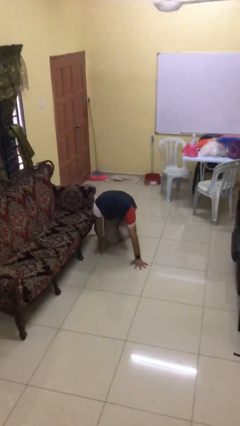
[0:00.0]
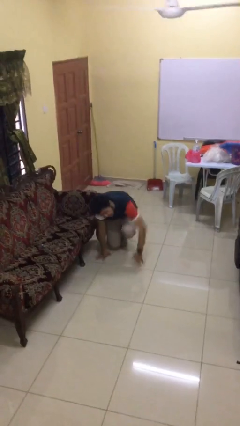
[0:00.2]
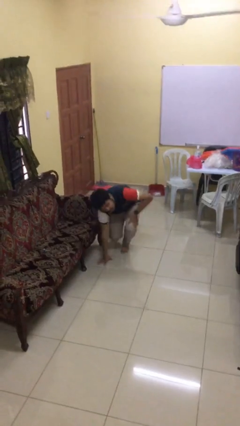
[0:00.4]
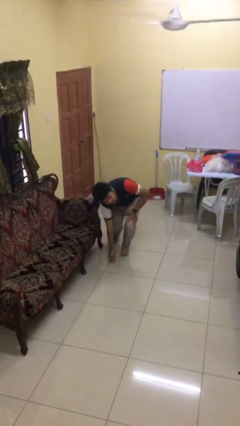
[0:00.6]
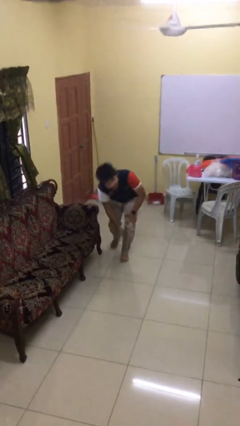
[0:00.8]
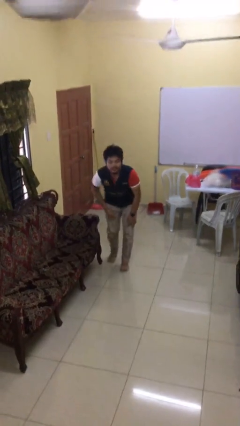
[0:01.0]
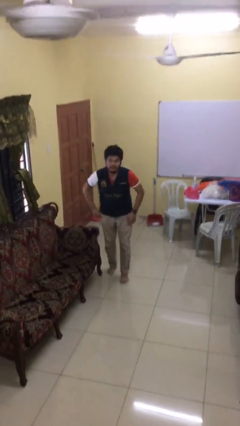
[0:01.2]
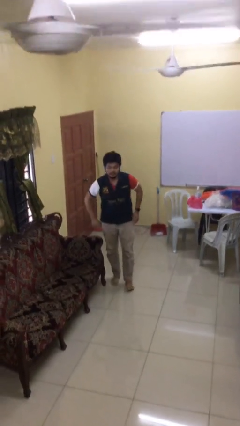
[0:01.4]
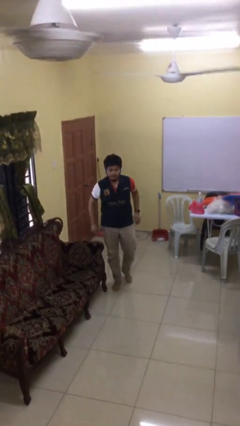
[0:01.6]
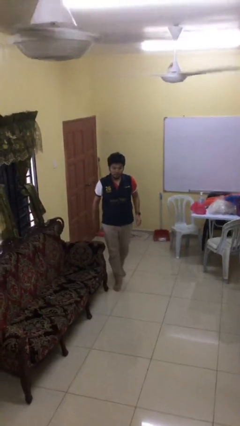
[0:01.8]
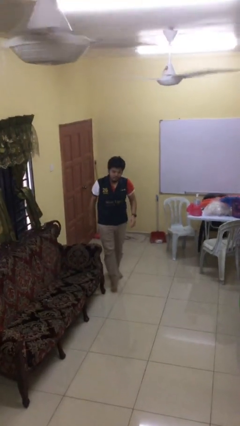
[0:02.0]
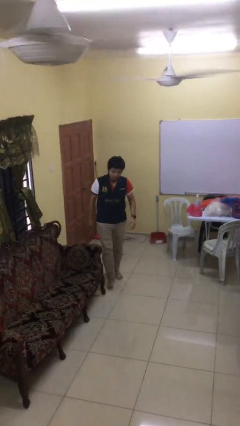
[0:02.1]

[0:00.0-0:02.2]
person stands up from floor

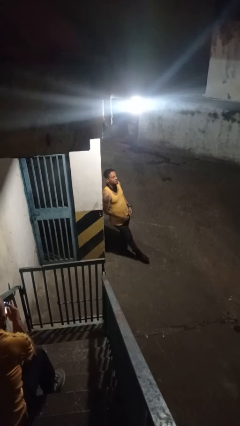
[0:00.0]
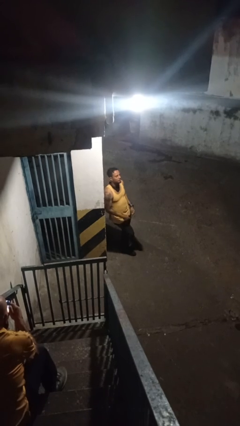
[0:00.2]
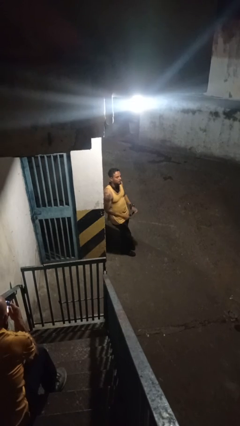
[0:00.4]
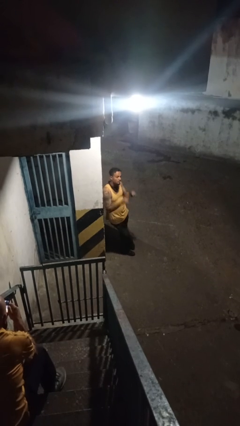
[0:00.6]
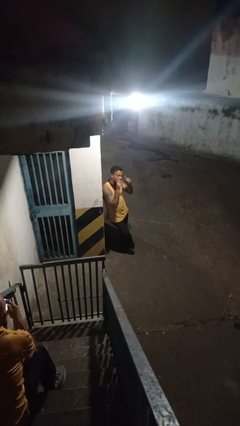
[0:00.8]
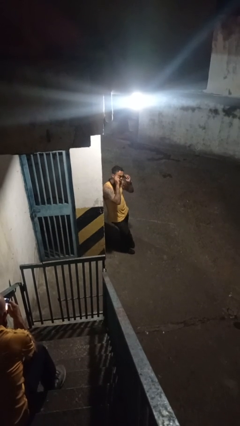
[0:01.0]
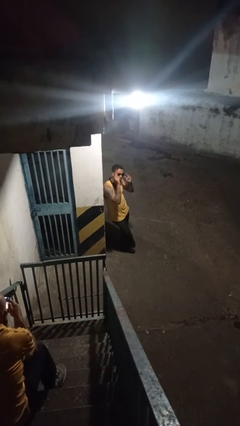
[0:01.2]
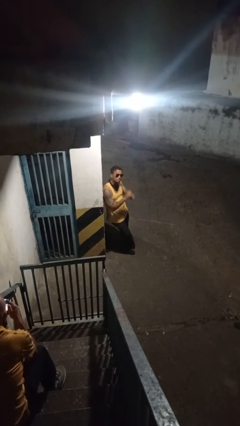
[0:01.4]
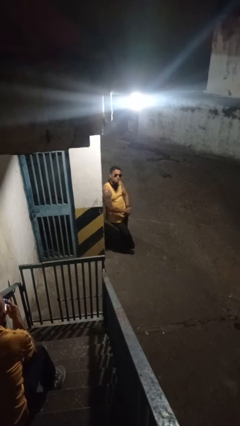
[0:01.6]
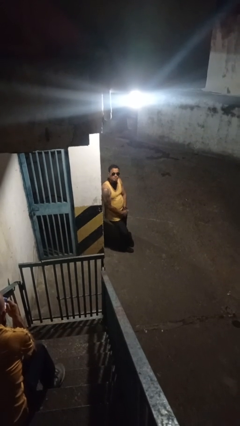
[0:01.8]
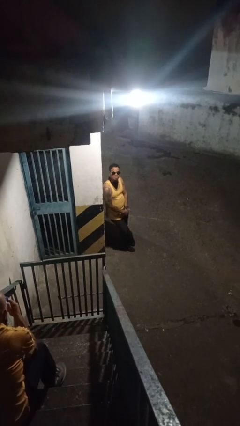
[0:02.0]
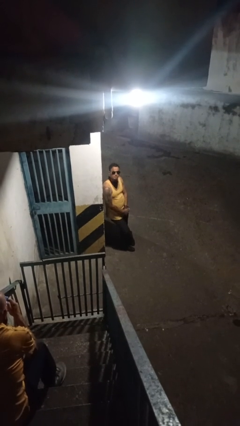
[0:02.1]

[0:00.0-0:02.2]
person puts on sunglasses

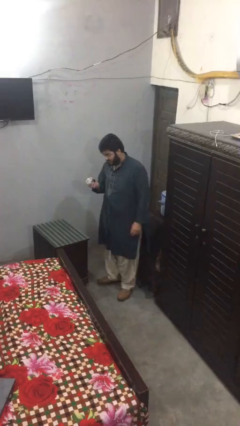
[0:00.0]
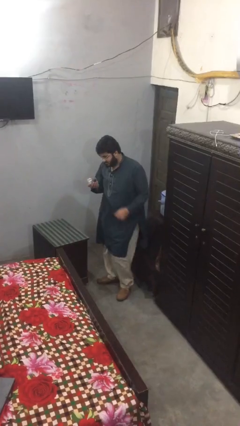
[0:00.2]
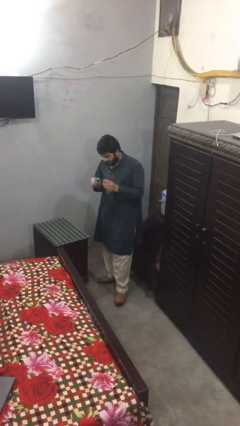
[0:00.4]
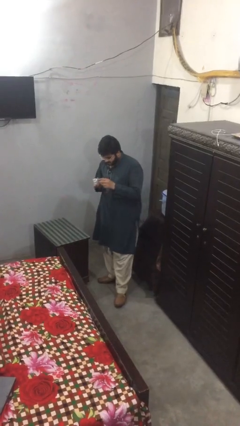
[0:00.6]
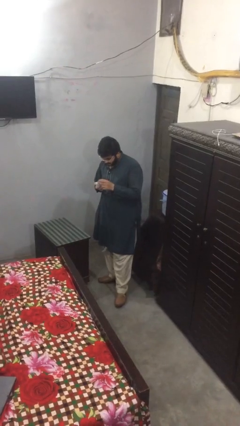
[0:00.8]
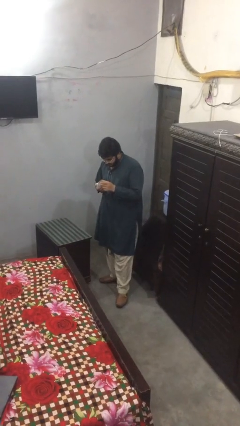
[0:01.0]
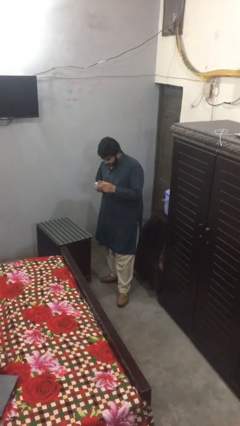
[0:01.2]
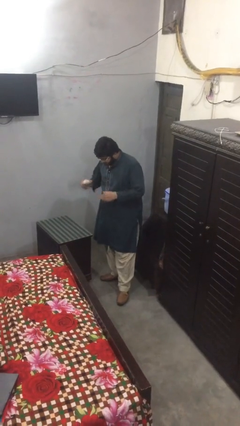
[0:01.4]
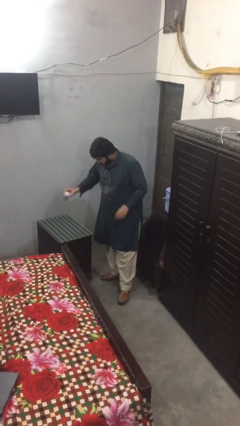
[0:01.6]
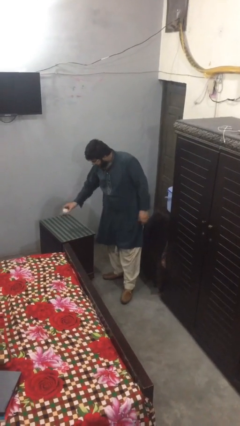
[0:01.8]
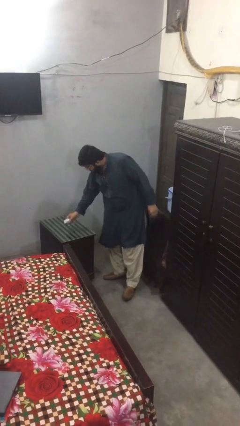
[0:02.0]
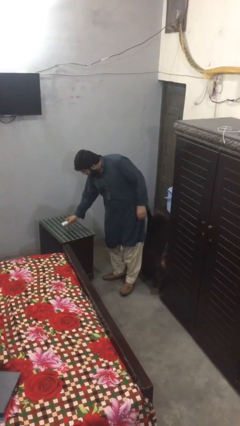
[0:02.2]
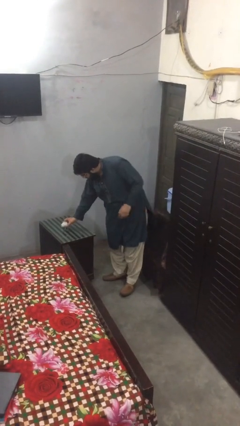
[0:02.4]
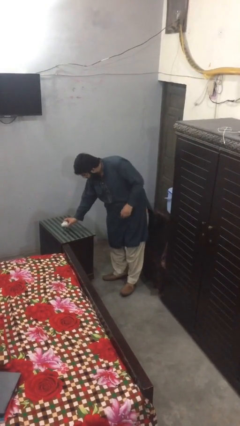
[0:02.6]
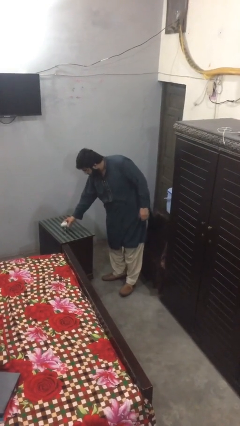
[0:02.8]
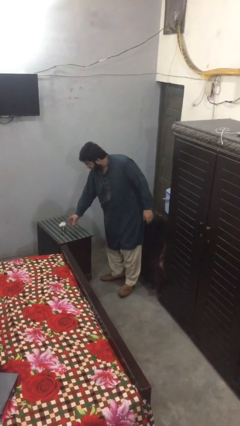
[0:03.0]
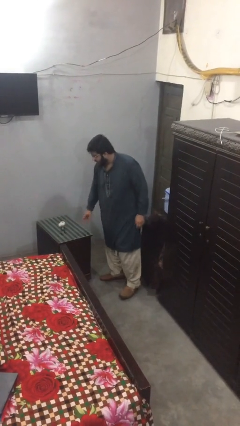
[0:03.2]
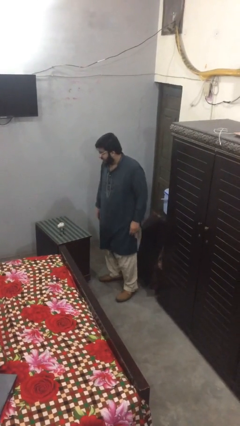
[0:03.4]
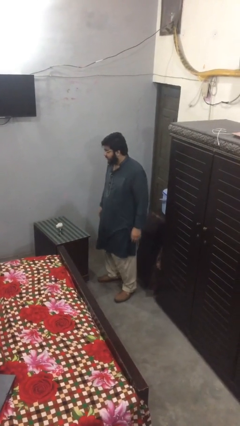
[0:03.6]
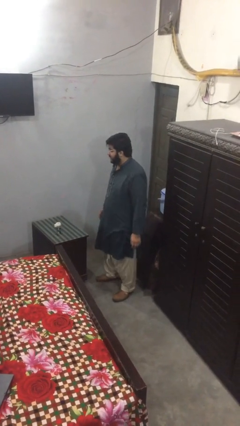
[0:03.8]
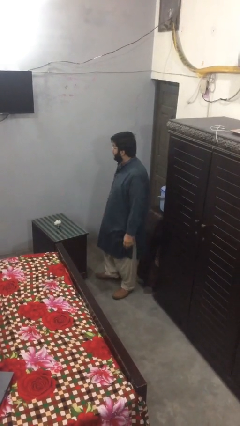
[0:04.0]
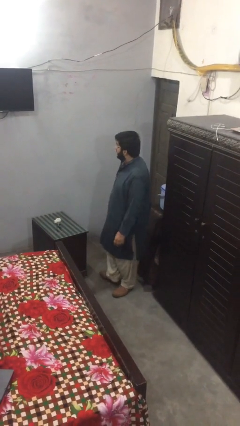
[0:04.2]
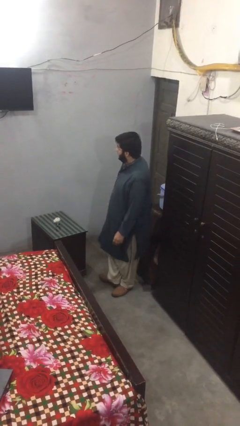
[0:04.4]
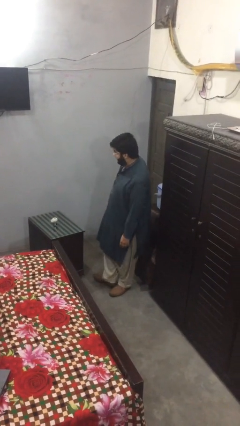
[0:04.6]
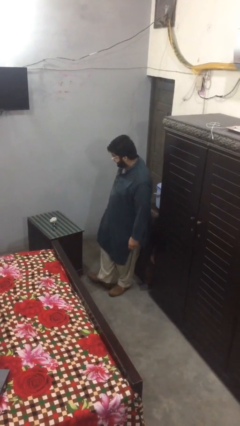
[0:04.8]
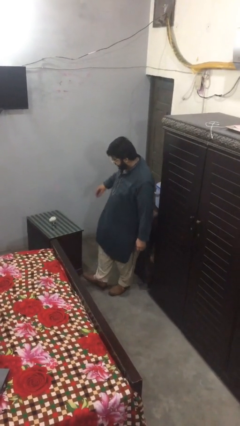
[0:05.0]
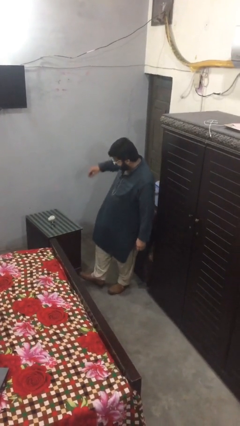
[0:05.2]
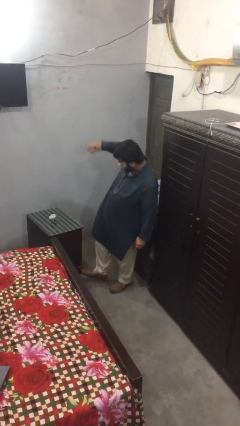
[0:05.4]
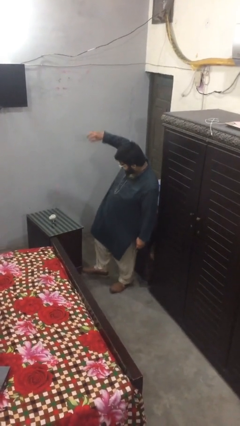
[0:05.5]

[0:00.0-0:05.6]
person puts down object on table

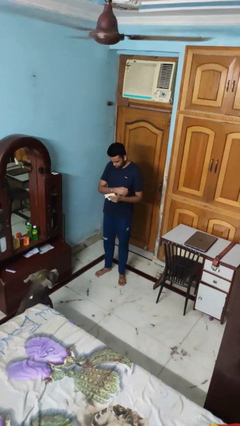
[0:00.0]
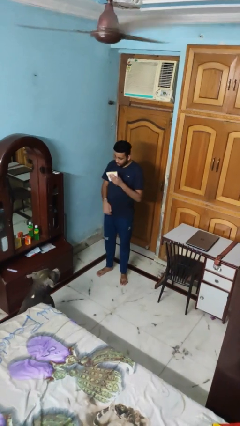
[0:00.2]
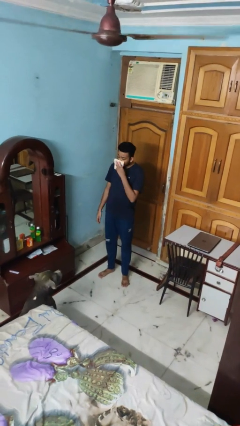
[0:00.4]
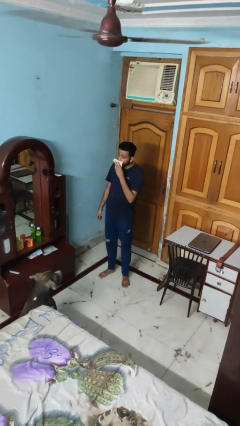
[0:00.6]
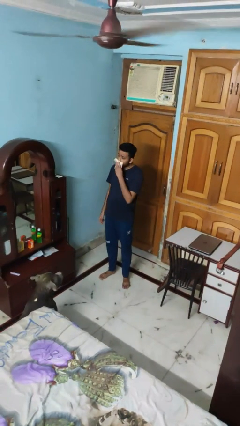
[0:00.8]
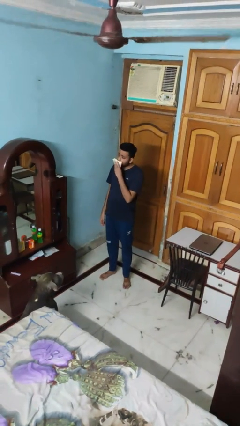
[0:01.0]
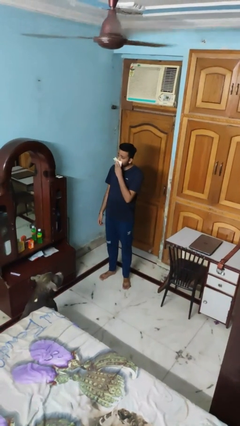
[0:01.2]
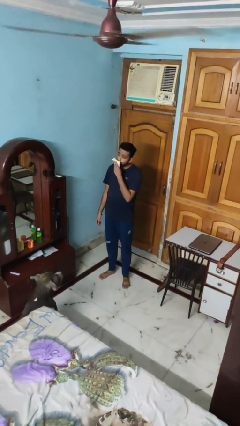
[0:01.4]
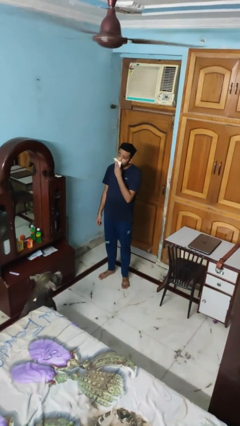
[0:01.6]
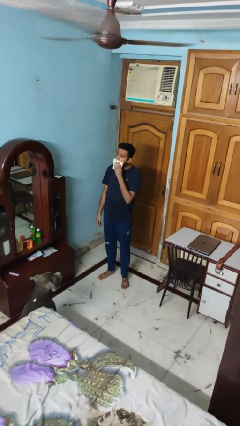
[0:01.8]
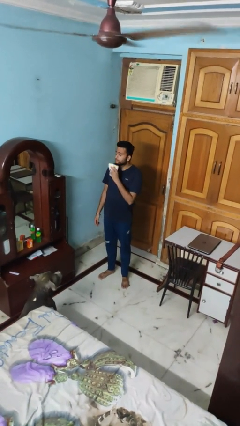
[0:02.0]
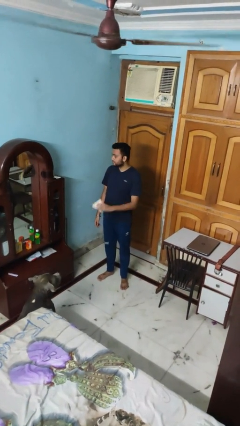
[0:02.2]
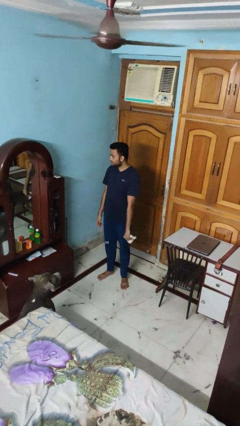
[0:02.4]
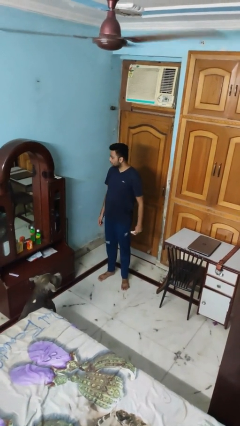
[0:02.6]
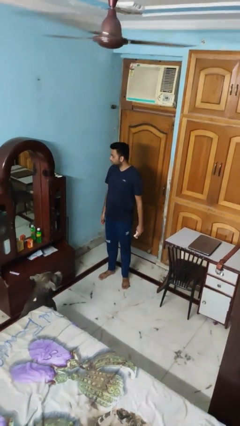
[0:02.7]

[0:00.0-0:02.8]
person wipes mouth with napkin

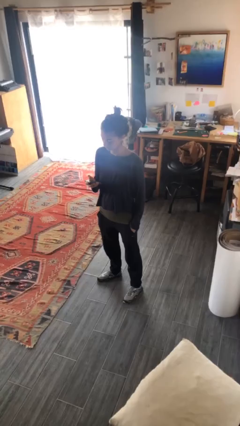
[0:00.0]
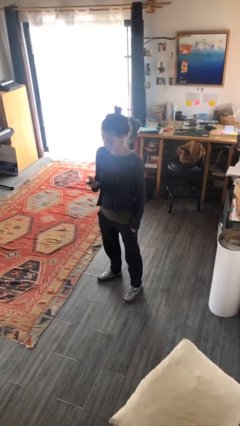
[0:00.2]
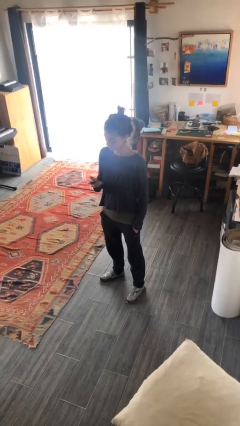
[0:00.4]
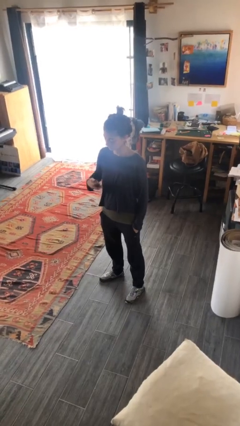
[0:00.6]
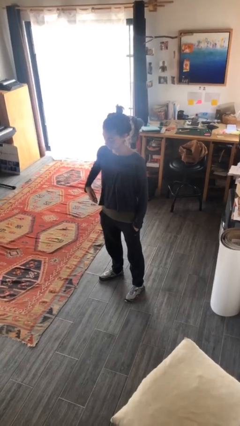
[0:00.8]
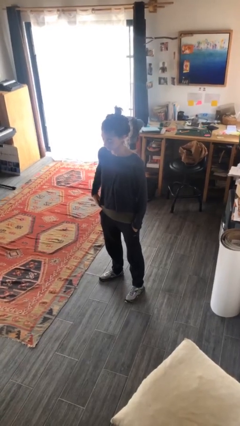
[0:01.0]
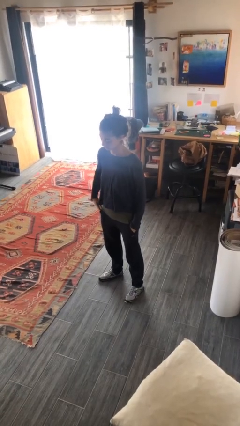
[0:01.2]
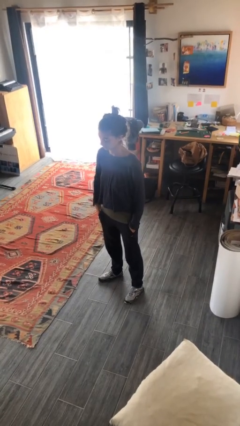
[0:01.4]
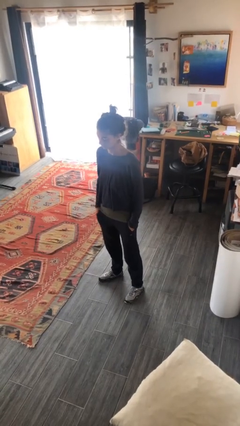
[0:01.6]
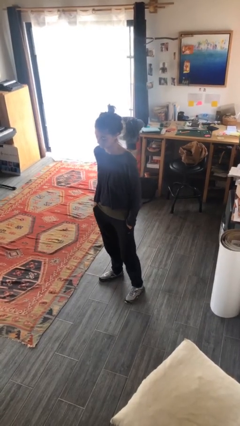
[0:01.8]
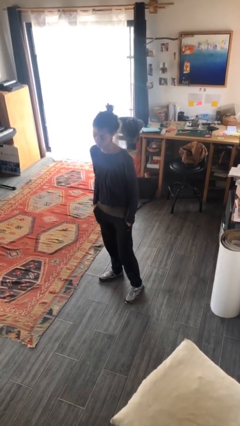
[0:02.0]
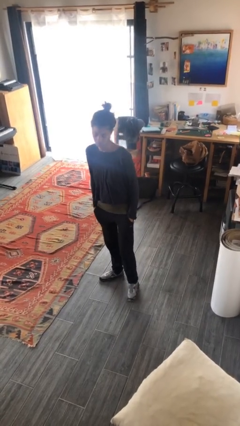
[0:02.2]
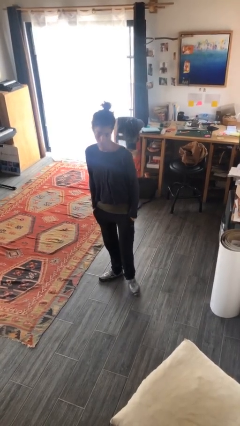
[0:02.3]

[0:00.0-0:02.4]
person puts phone into pocket

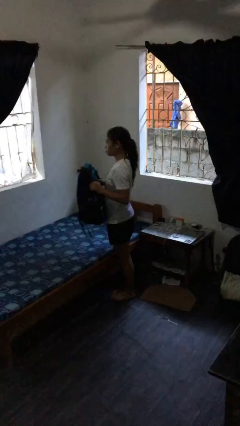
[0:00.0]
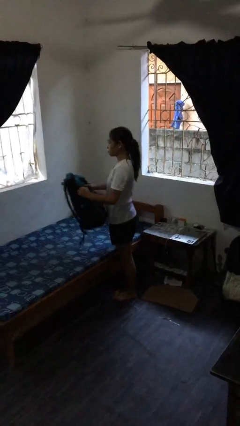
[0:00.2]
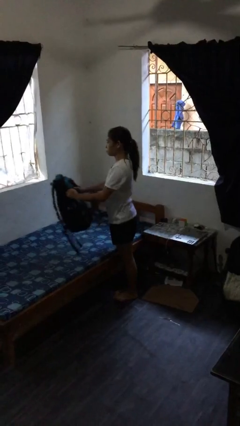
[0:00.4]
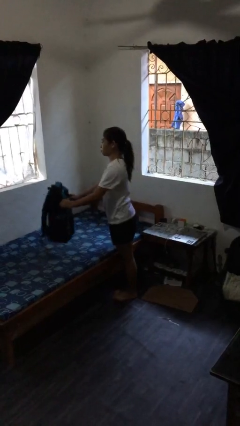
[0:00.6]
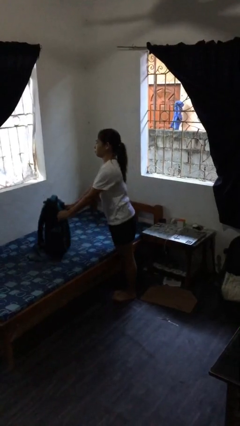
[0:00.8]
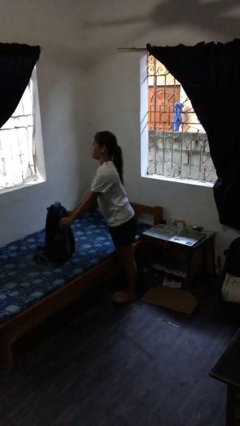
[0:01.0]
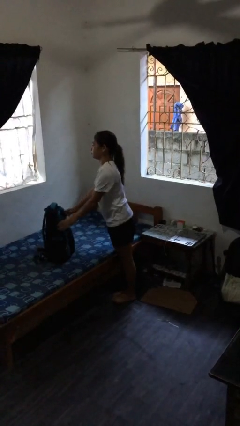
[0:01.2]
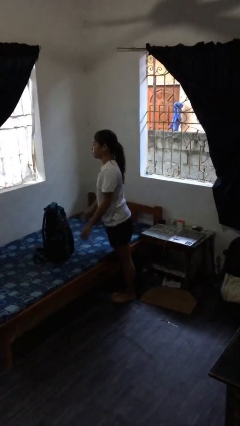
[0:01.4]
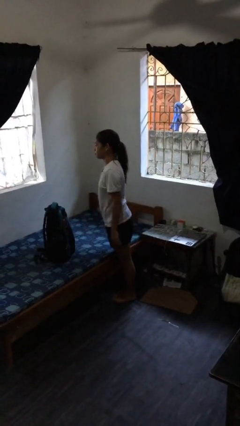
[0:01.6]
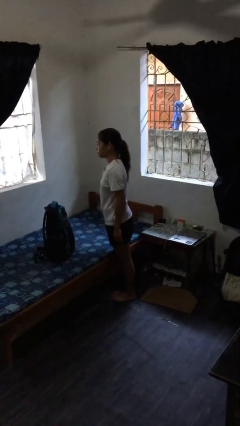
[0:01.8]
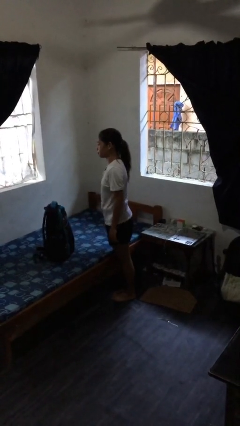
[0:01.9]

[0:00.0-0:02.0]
person puts down object on bed
